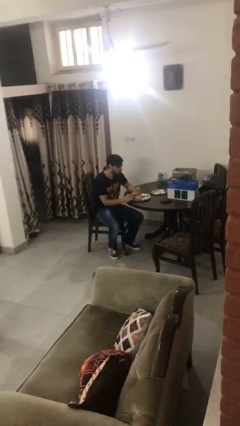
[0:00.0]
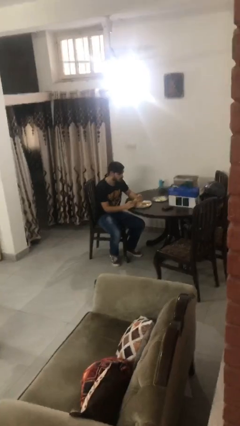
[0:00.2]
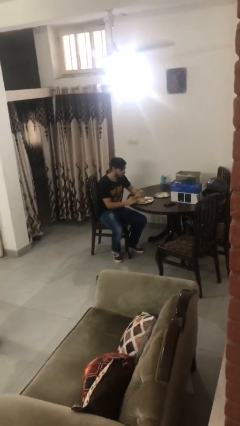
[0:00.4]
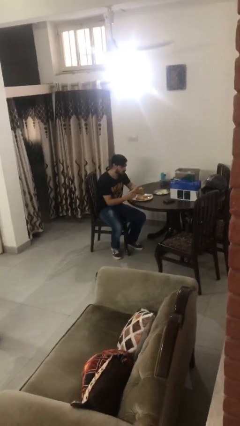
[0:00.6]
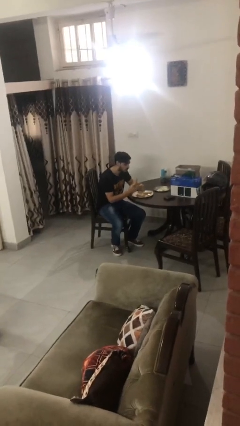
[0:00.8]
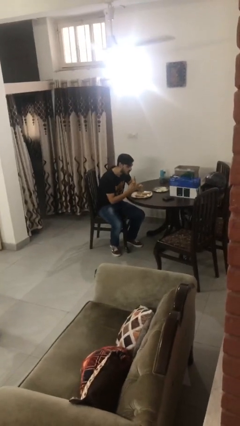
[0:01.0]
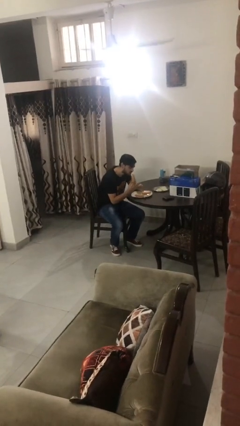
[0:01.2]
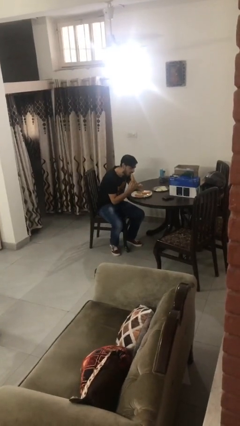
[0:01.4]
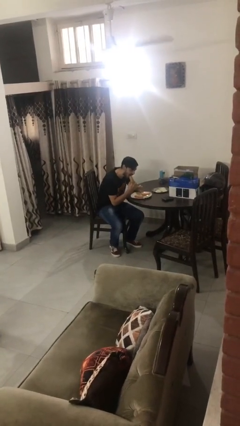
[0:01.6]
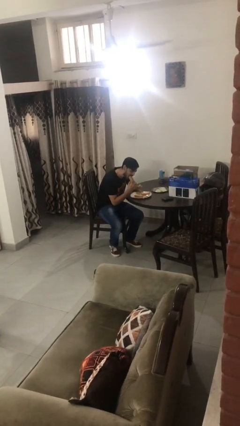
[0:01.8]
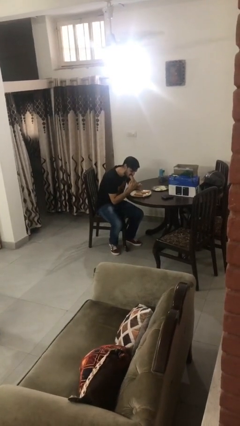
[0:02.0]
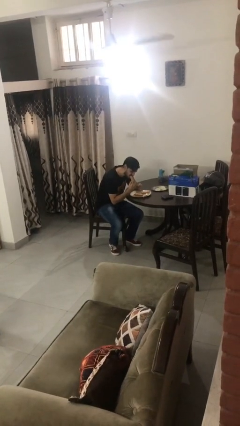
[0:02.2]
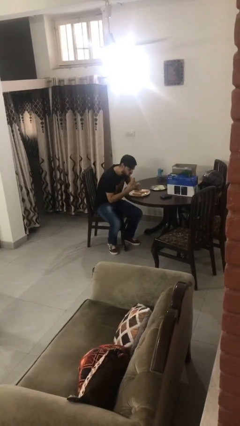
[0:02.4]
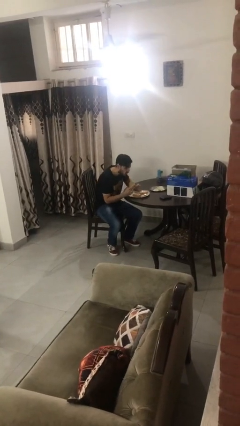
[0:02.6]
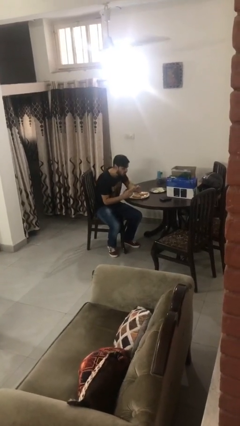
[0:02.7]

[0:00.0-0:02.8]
person eats with hands

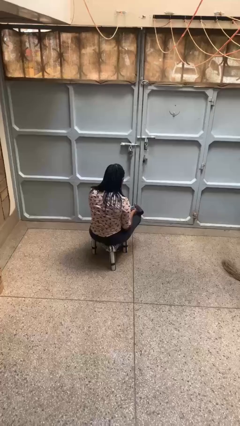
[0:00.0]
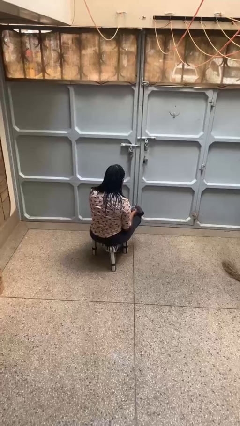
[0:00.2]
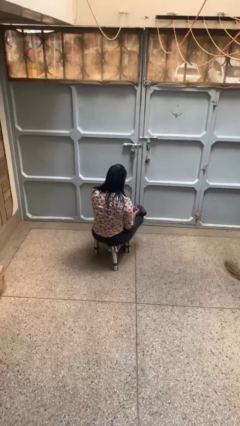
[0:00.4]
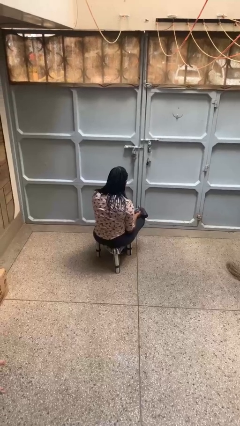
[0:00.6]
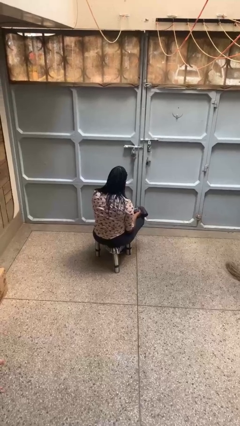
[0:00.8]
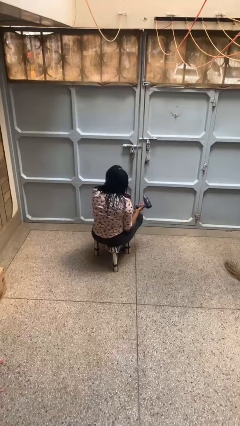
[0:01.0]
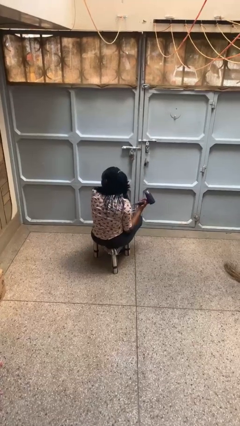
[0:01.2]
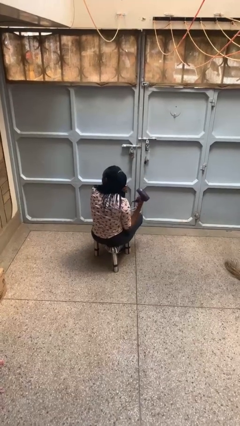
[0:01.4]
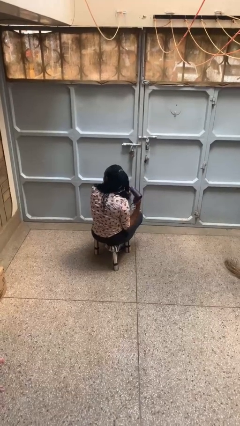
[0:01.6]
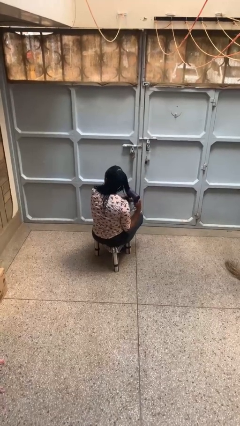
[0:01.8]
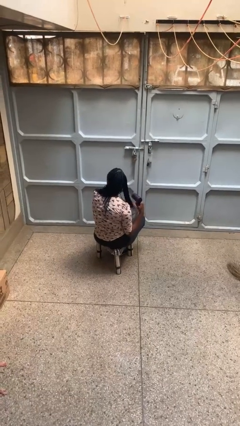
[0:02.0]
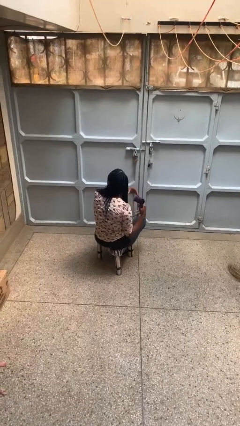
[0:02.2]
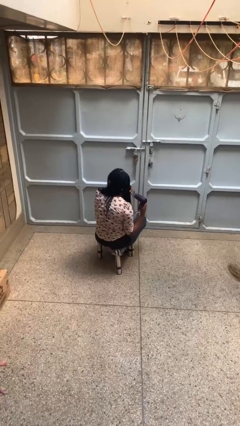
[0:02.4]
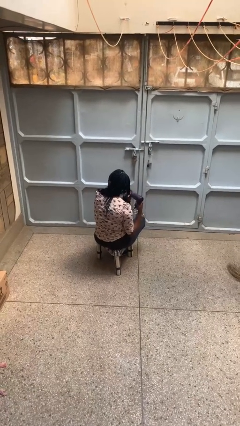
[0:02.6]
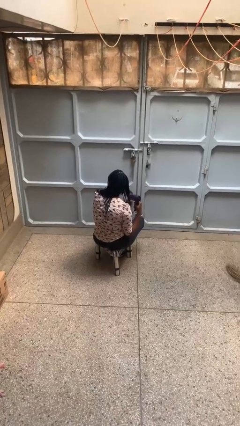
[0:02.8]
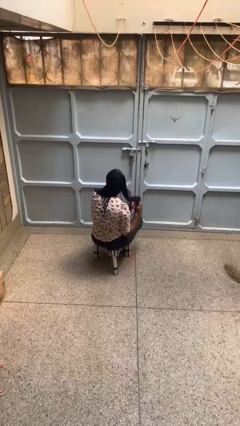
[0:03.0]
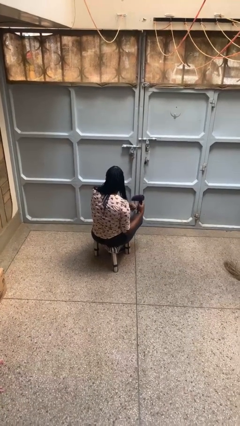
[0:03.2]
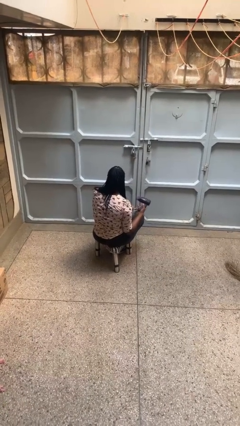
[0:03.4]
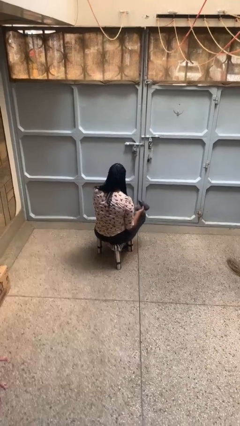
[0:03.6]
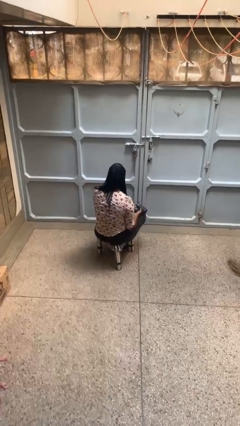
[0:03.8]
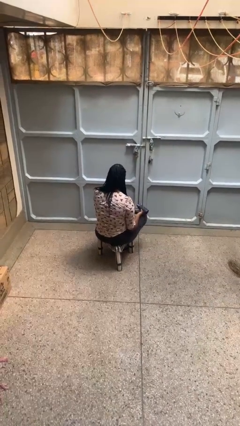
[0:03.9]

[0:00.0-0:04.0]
person dries hair with hairdryer

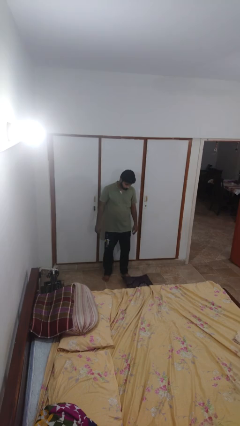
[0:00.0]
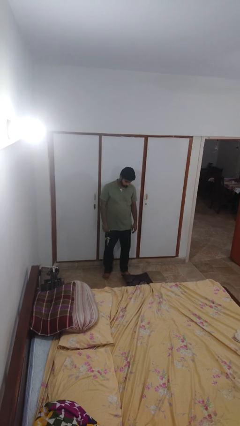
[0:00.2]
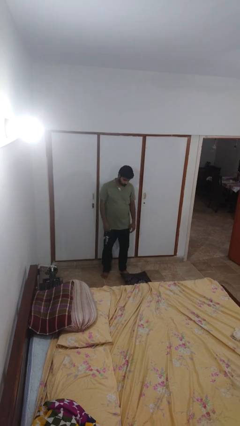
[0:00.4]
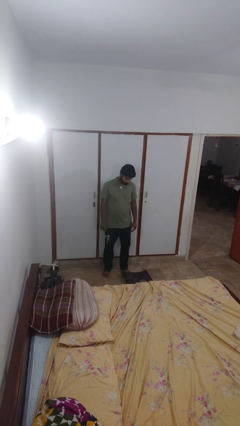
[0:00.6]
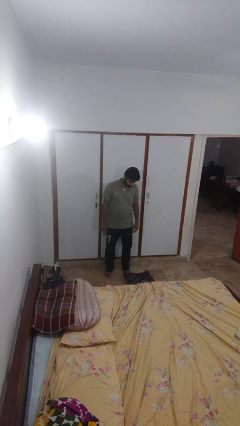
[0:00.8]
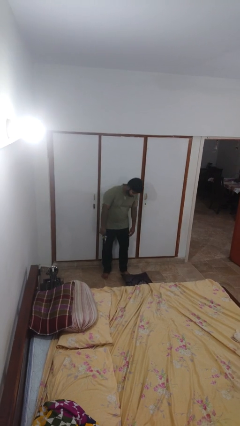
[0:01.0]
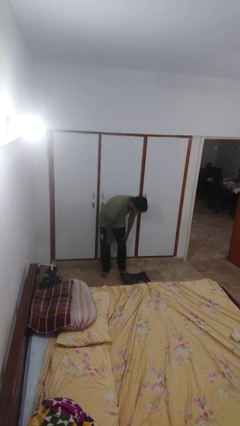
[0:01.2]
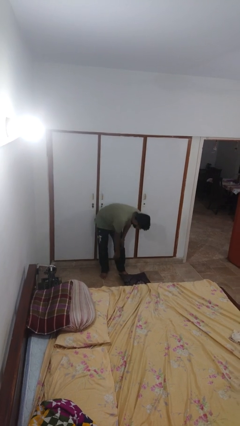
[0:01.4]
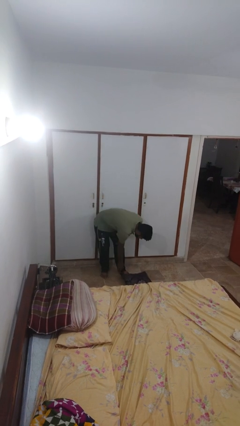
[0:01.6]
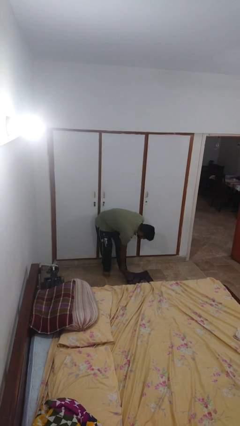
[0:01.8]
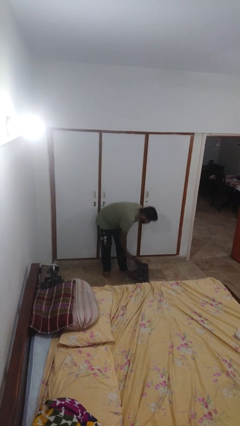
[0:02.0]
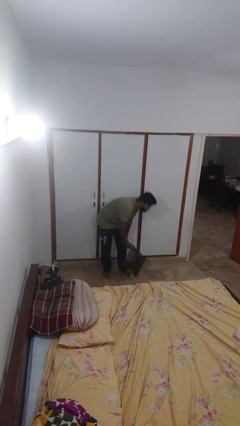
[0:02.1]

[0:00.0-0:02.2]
person picks up object from floor

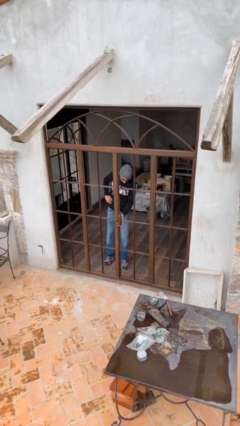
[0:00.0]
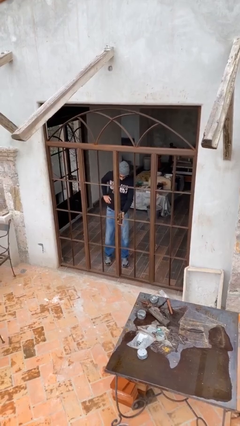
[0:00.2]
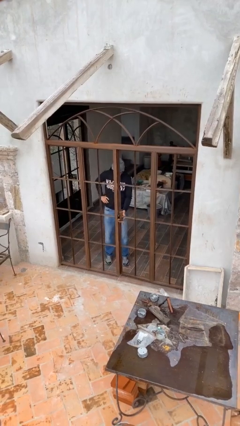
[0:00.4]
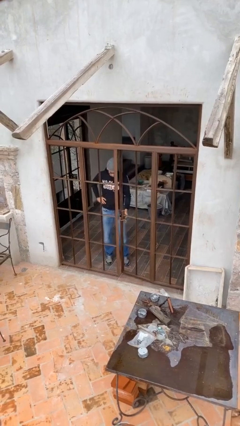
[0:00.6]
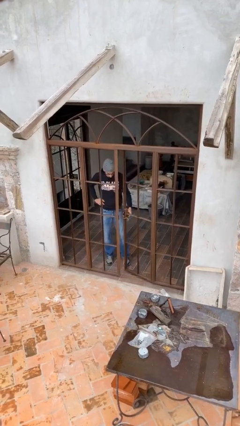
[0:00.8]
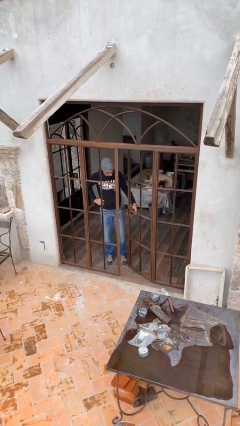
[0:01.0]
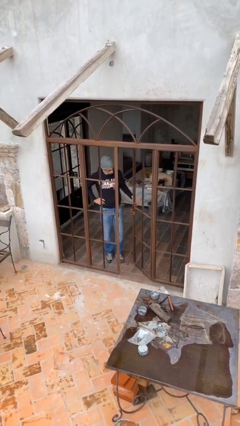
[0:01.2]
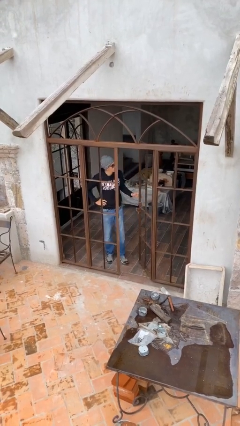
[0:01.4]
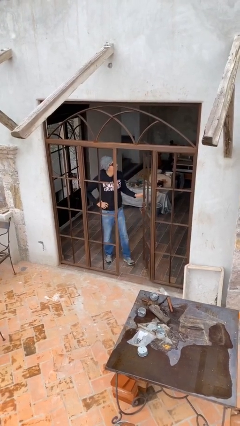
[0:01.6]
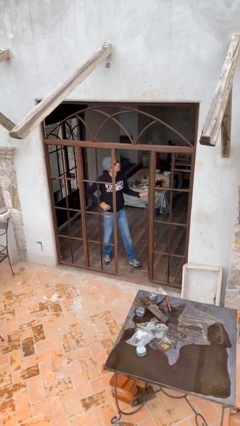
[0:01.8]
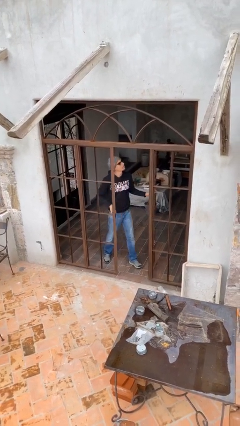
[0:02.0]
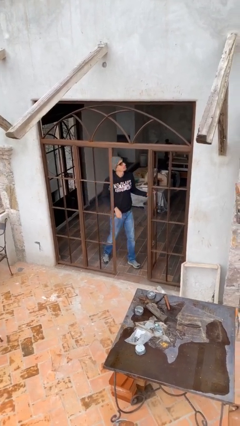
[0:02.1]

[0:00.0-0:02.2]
person opens facility door

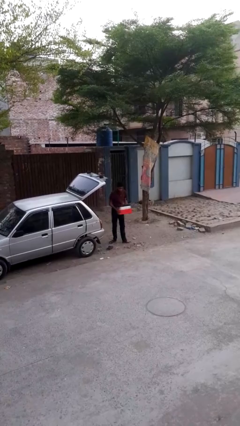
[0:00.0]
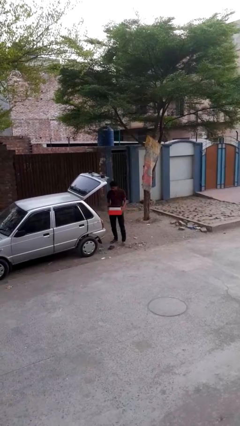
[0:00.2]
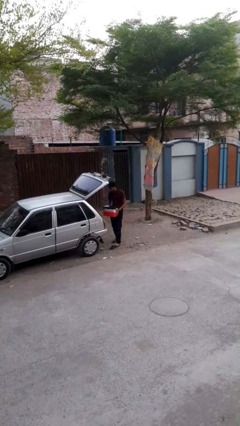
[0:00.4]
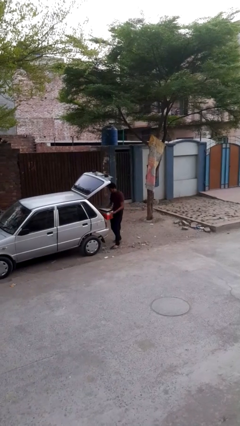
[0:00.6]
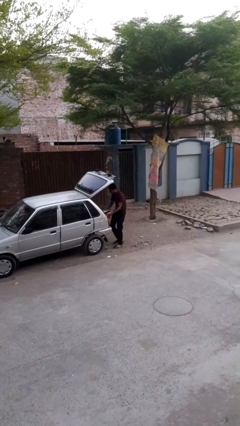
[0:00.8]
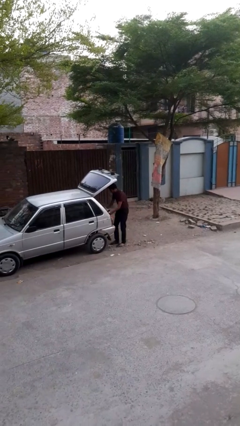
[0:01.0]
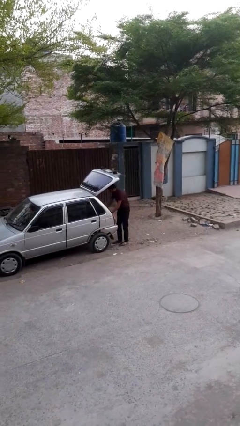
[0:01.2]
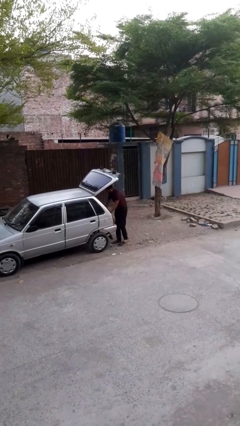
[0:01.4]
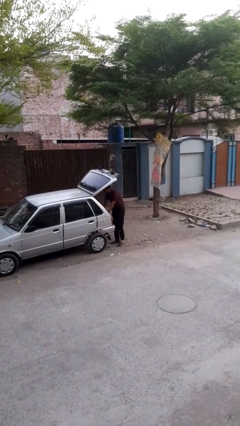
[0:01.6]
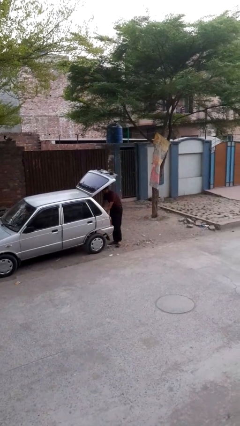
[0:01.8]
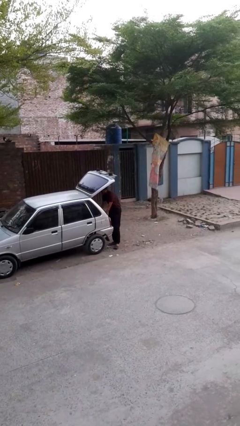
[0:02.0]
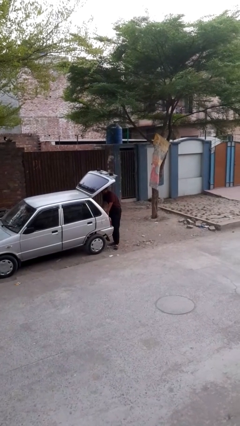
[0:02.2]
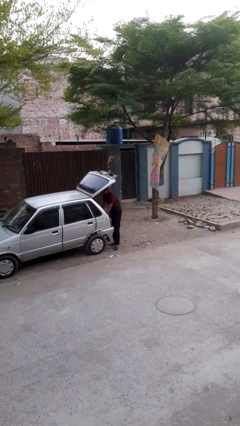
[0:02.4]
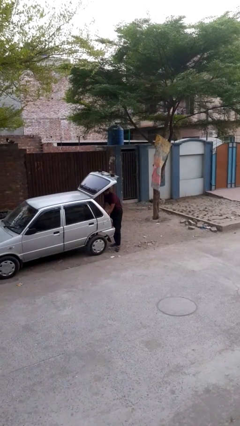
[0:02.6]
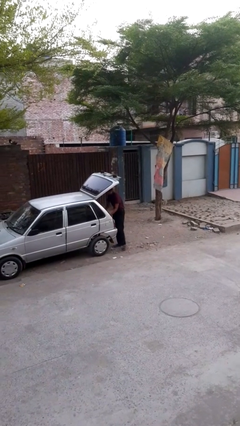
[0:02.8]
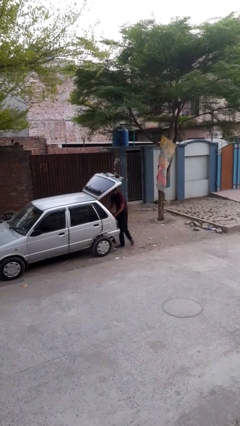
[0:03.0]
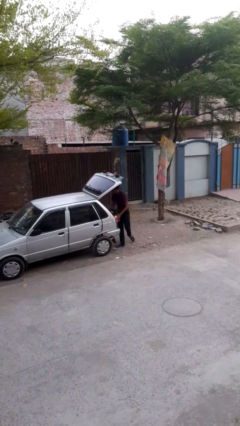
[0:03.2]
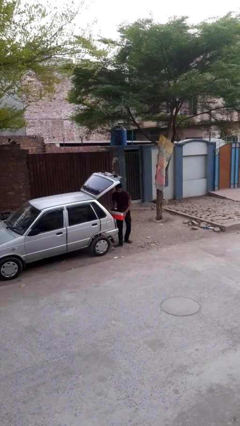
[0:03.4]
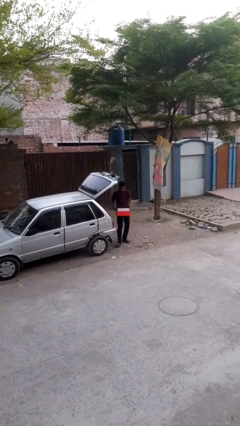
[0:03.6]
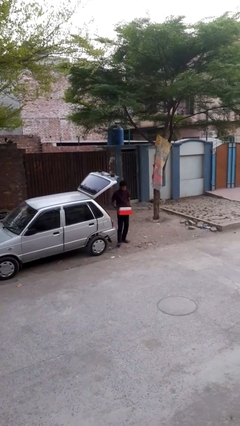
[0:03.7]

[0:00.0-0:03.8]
person loads car

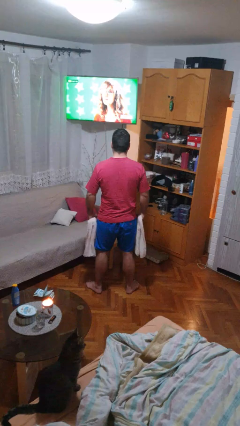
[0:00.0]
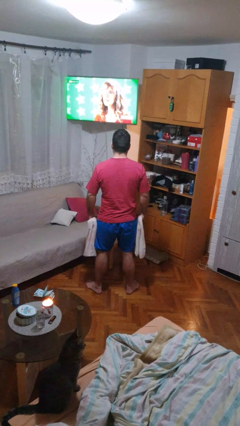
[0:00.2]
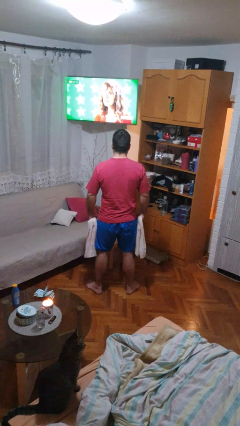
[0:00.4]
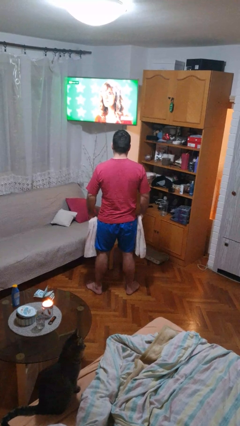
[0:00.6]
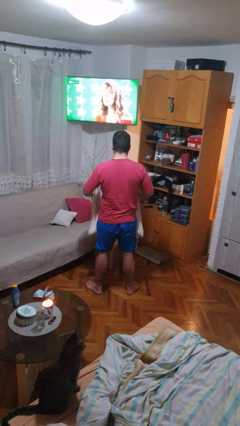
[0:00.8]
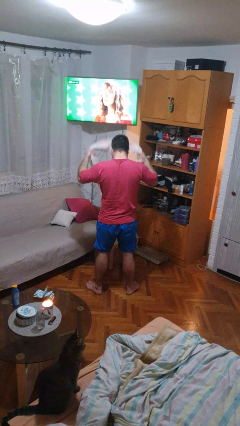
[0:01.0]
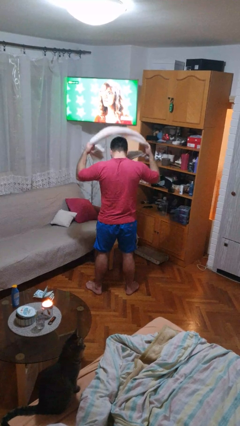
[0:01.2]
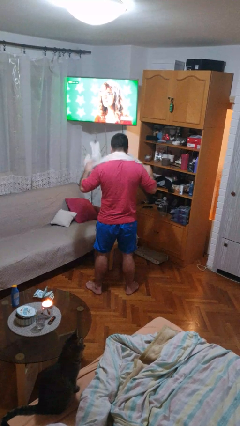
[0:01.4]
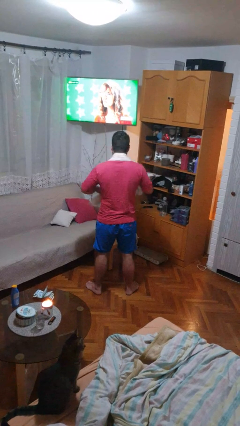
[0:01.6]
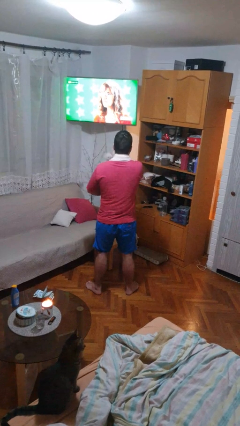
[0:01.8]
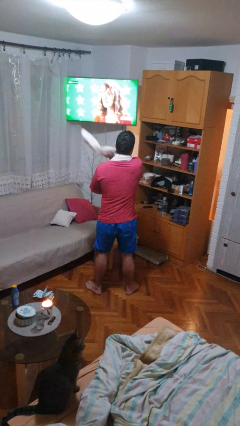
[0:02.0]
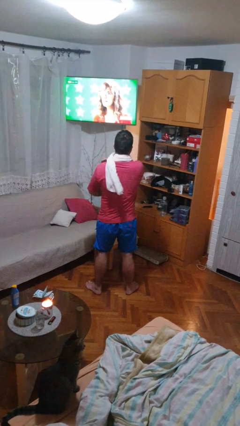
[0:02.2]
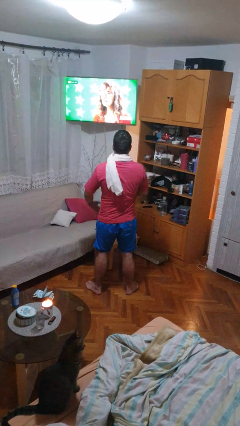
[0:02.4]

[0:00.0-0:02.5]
person puts on scarf
